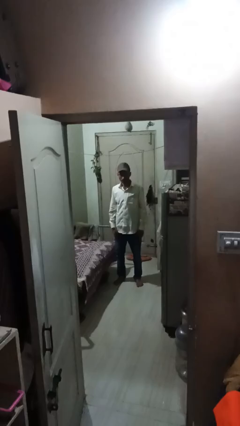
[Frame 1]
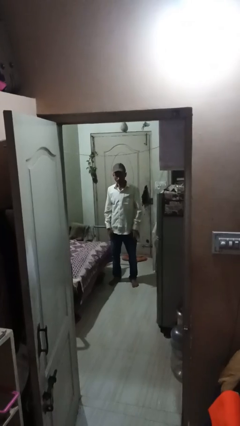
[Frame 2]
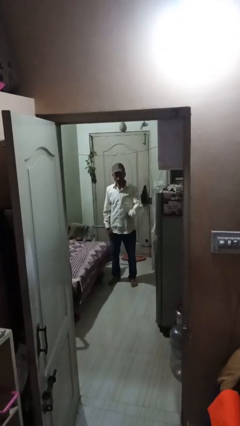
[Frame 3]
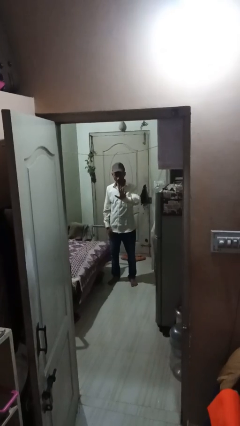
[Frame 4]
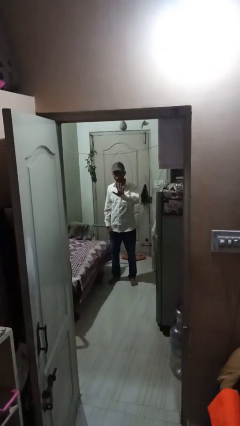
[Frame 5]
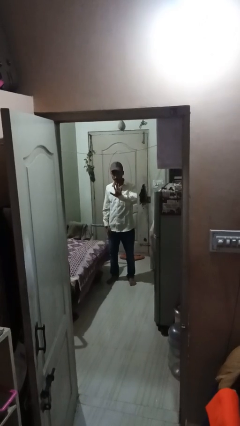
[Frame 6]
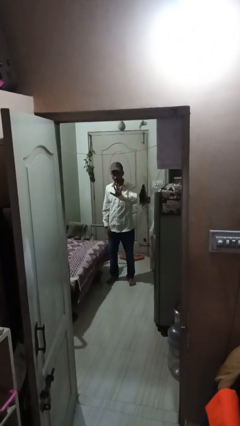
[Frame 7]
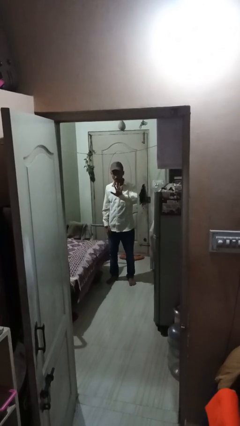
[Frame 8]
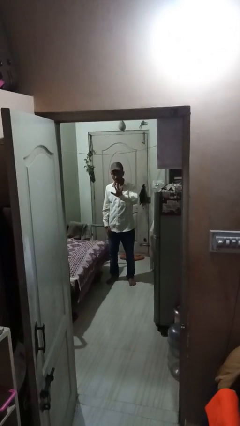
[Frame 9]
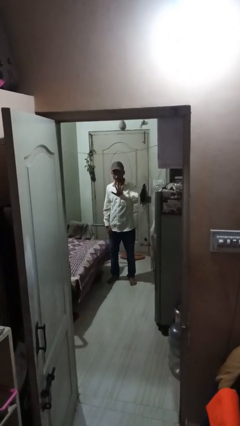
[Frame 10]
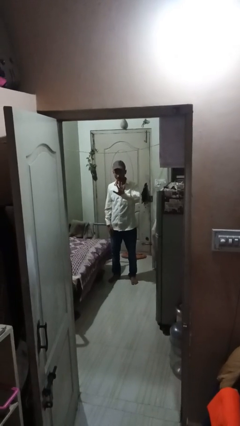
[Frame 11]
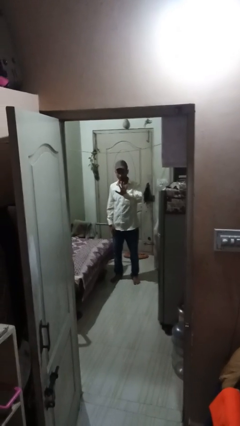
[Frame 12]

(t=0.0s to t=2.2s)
person gestures number five

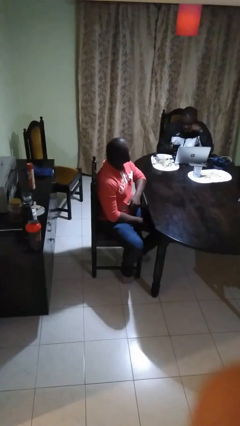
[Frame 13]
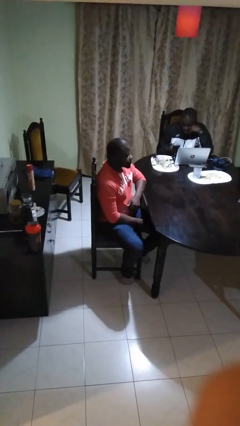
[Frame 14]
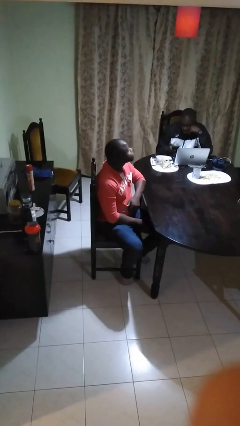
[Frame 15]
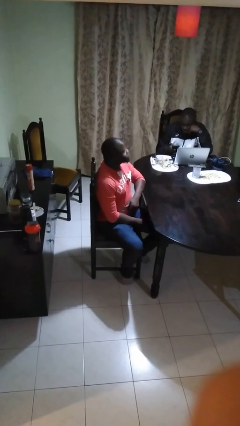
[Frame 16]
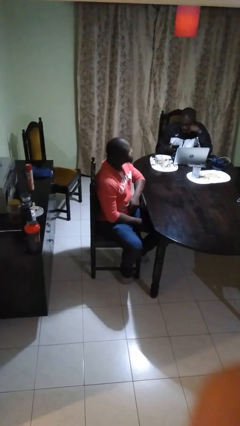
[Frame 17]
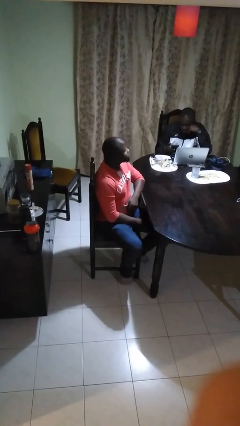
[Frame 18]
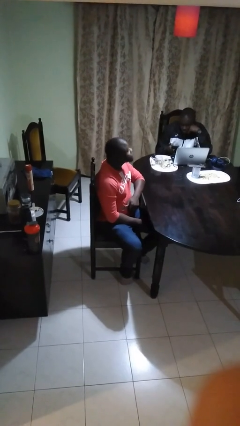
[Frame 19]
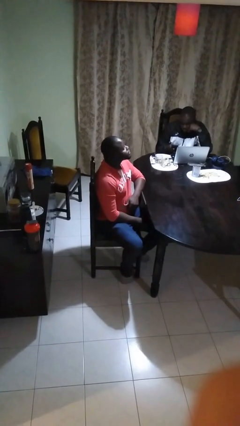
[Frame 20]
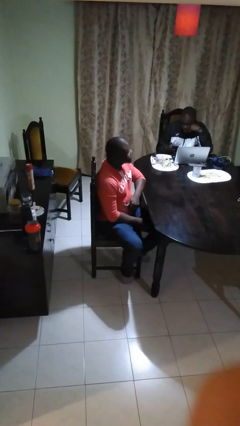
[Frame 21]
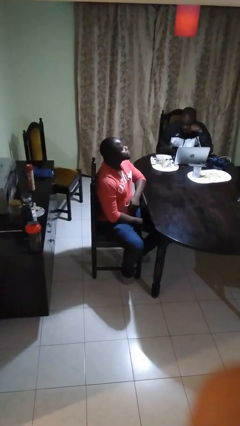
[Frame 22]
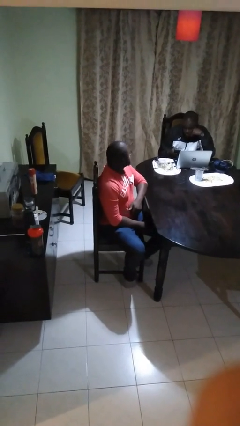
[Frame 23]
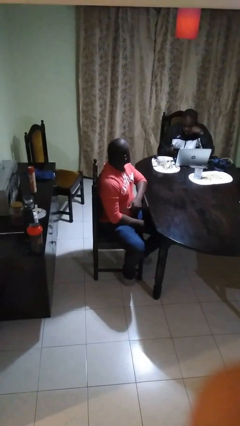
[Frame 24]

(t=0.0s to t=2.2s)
person nods head

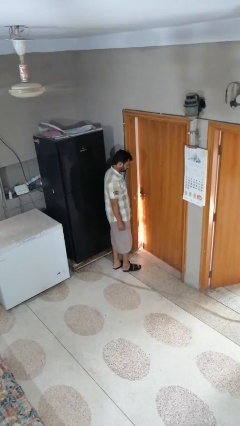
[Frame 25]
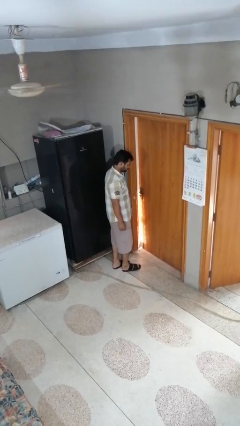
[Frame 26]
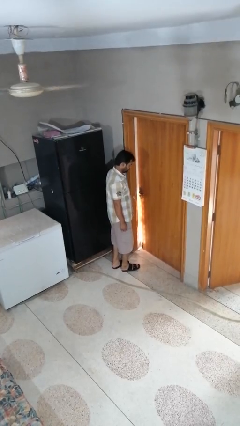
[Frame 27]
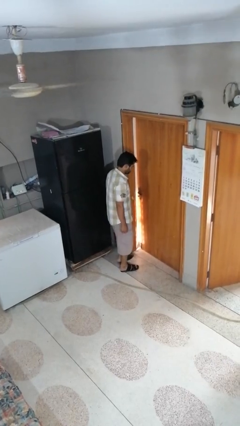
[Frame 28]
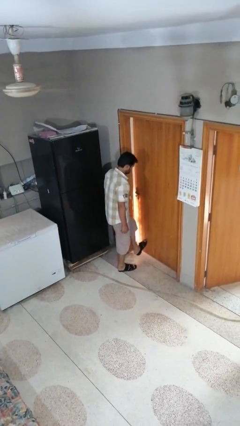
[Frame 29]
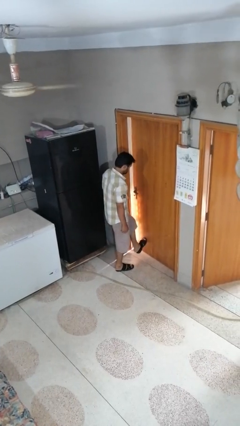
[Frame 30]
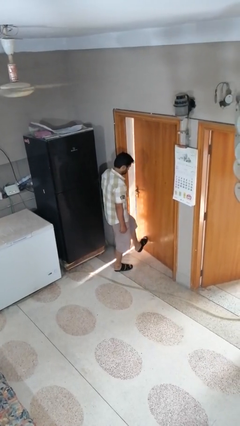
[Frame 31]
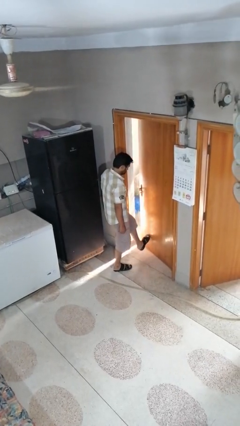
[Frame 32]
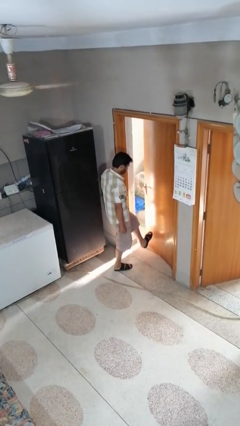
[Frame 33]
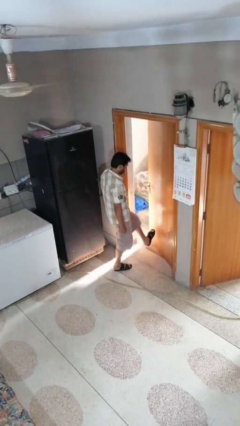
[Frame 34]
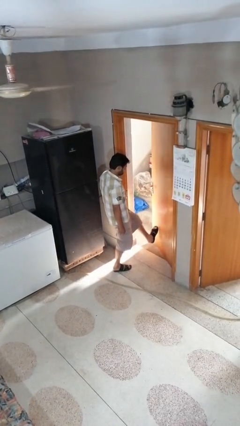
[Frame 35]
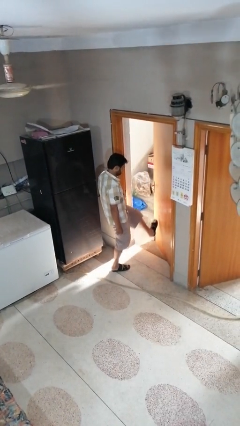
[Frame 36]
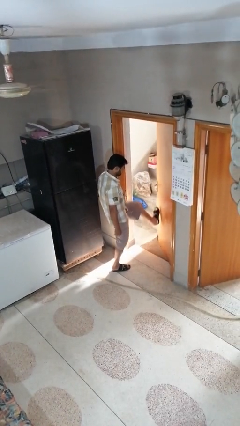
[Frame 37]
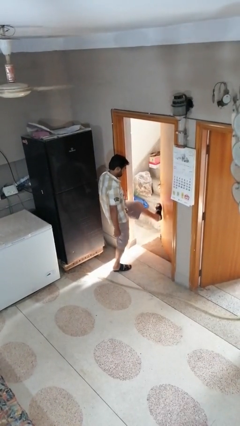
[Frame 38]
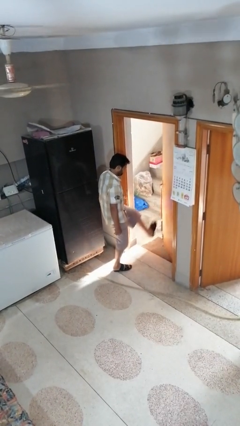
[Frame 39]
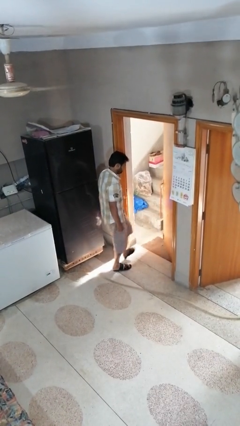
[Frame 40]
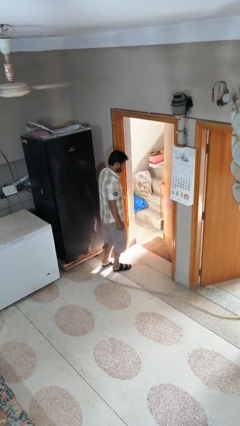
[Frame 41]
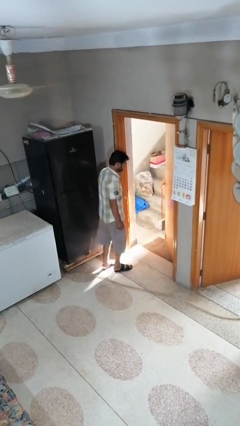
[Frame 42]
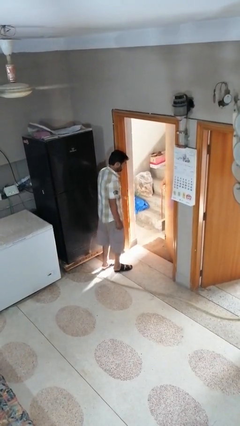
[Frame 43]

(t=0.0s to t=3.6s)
person opens facility door

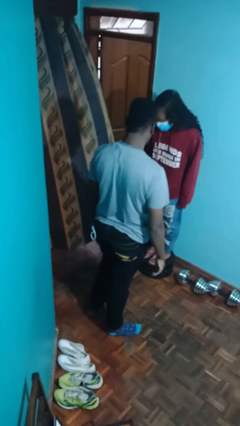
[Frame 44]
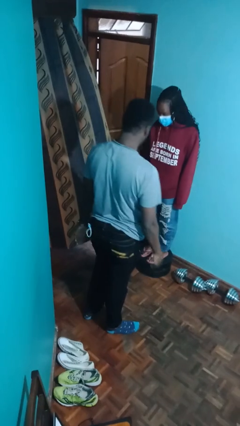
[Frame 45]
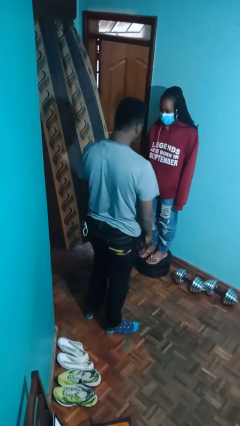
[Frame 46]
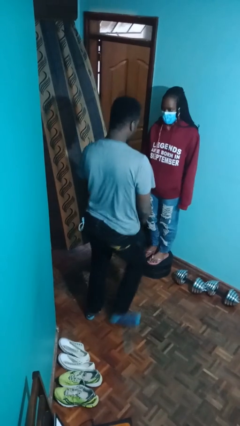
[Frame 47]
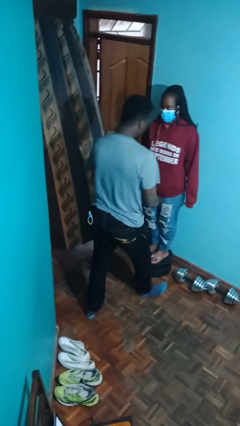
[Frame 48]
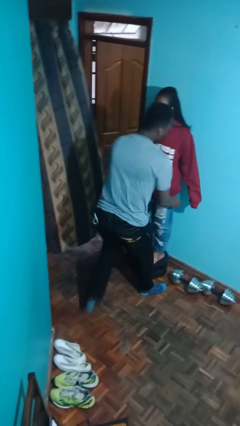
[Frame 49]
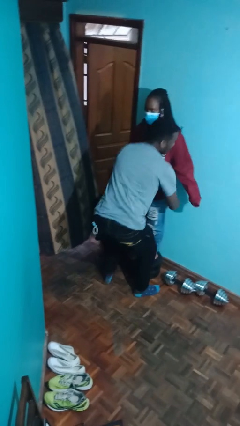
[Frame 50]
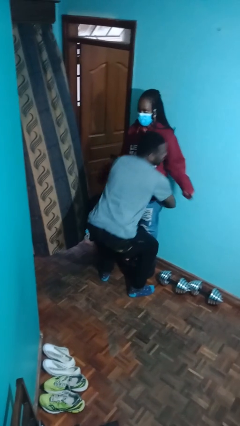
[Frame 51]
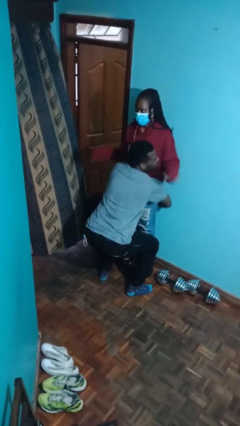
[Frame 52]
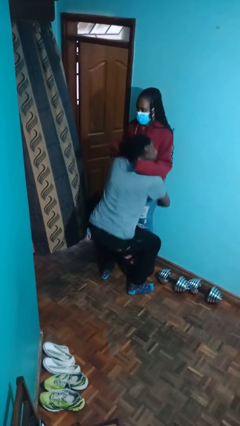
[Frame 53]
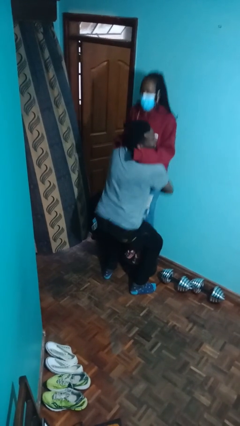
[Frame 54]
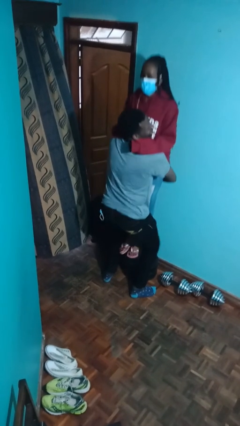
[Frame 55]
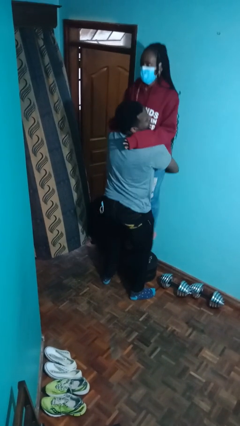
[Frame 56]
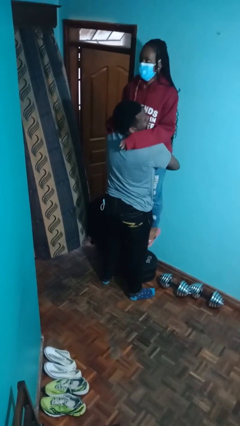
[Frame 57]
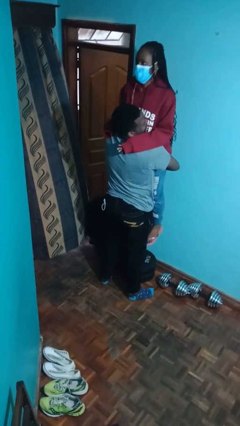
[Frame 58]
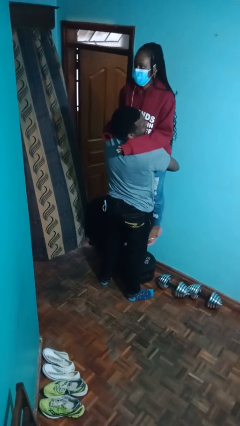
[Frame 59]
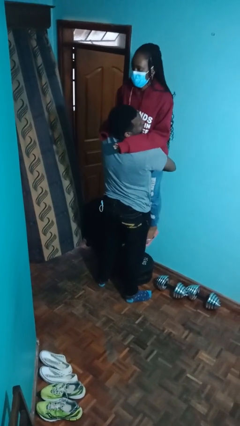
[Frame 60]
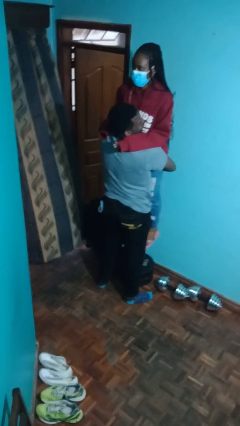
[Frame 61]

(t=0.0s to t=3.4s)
person picks up person

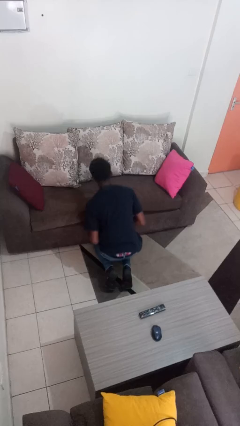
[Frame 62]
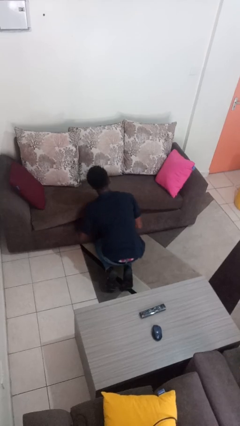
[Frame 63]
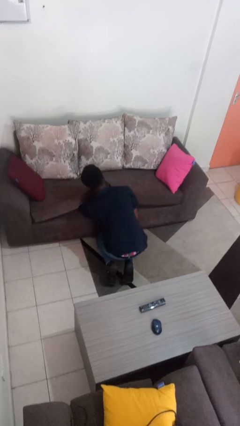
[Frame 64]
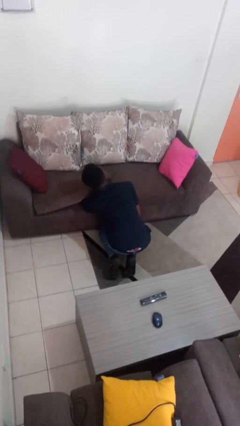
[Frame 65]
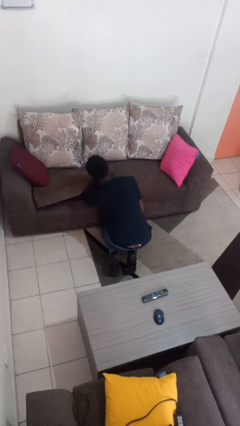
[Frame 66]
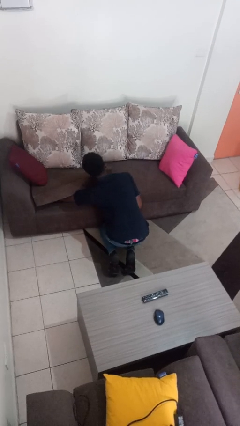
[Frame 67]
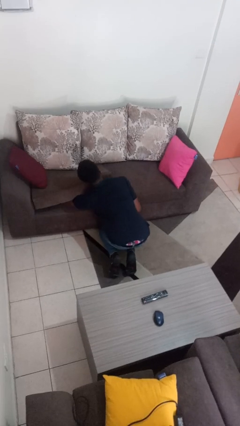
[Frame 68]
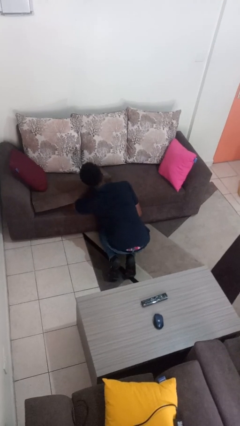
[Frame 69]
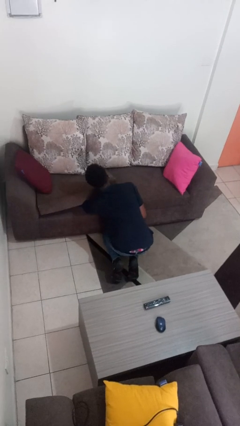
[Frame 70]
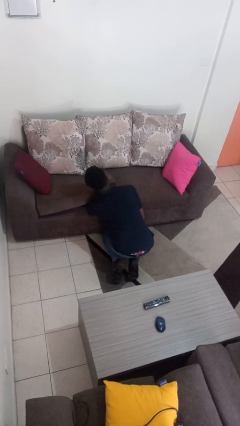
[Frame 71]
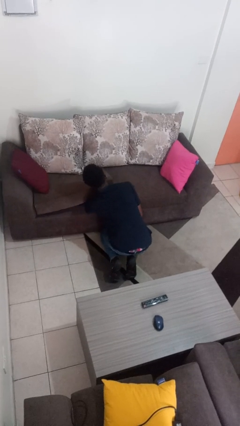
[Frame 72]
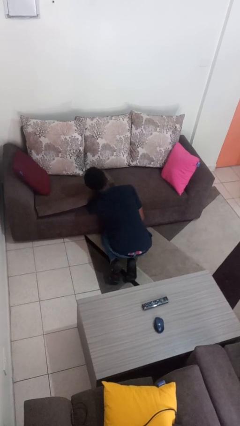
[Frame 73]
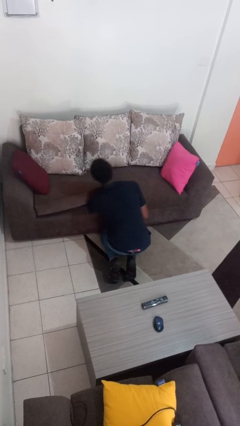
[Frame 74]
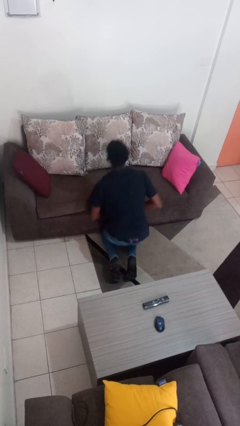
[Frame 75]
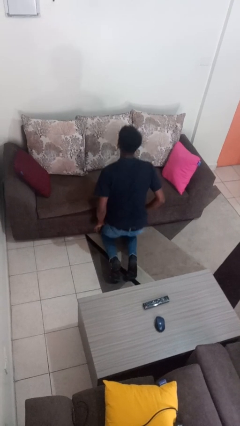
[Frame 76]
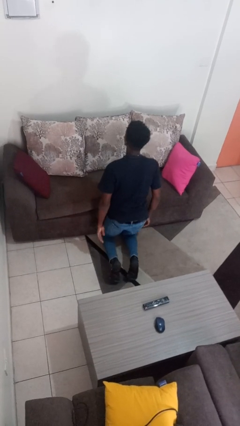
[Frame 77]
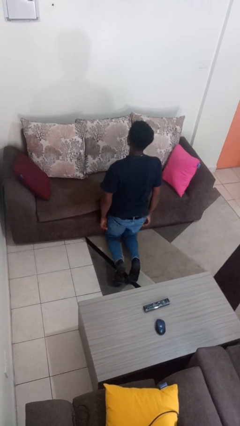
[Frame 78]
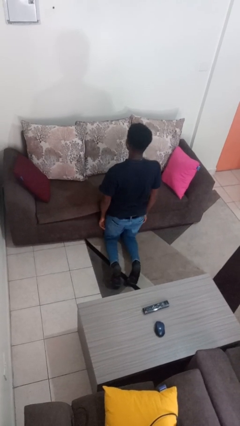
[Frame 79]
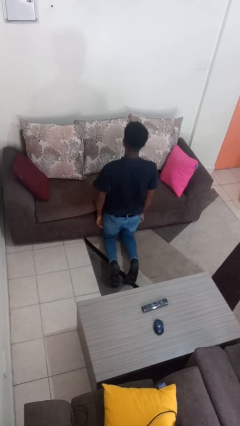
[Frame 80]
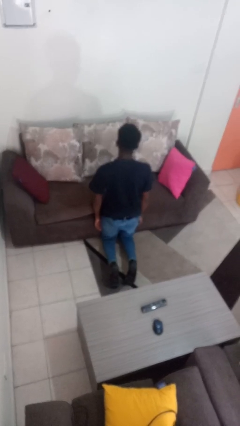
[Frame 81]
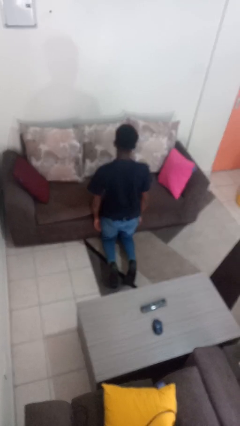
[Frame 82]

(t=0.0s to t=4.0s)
person searches under couch

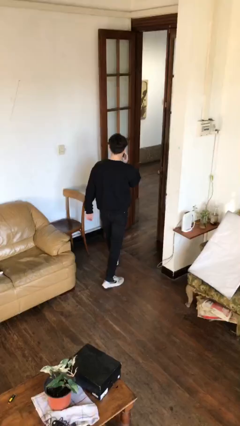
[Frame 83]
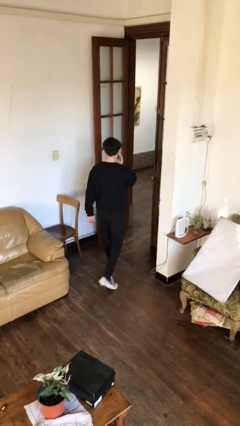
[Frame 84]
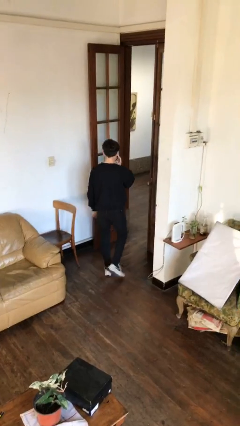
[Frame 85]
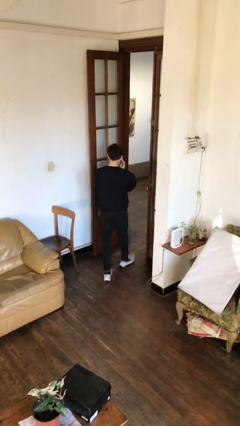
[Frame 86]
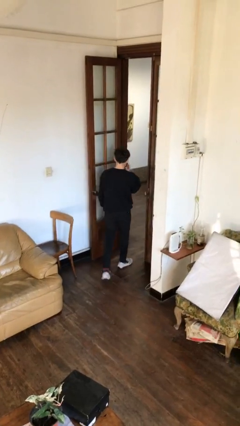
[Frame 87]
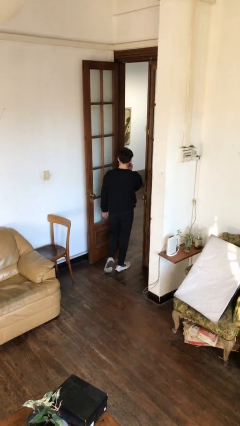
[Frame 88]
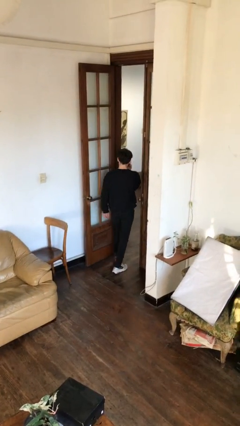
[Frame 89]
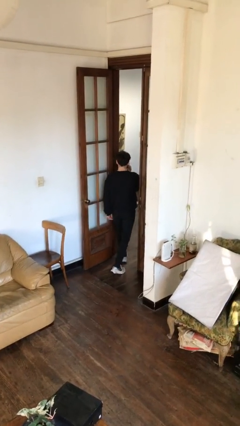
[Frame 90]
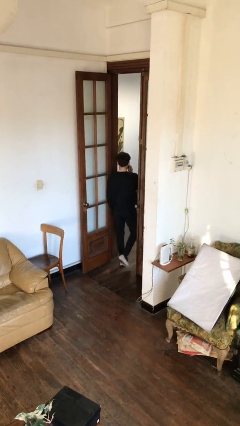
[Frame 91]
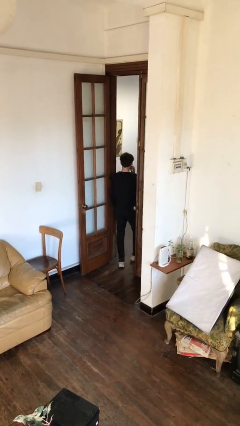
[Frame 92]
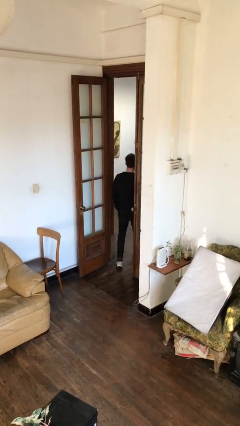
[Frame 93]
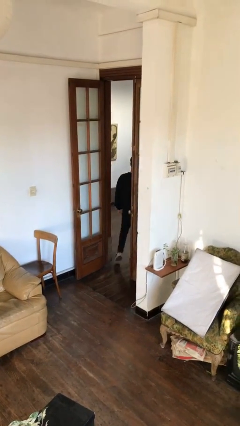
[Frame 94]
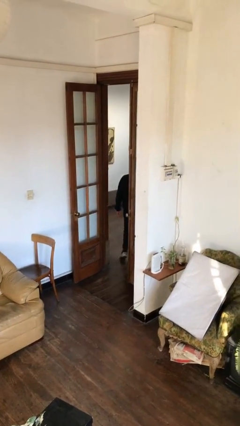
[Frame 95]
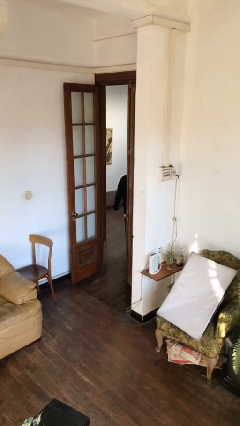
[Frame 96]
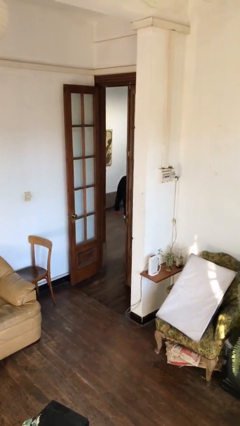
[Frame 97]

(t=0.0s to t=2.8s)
person exits scene through structure
